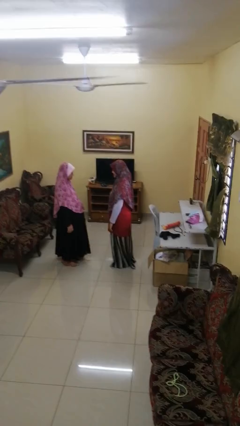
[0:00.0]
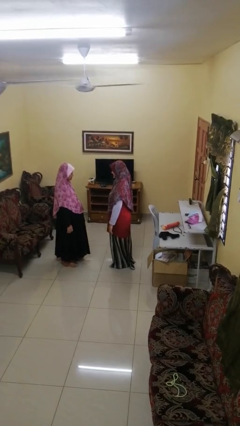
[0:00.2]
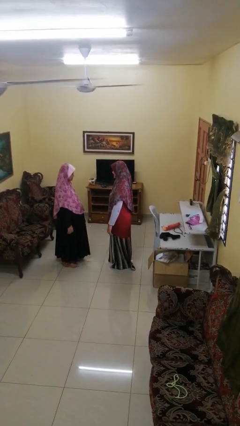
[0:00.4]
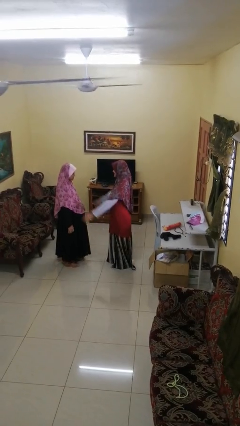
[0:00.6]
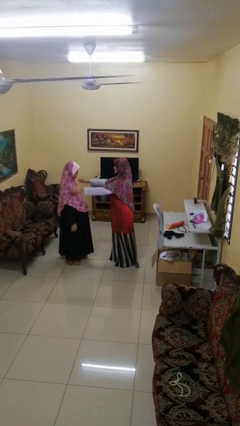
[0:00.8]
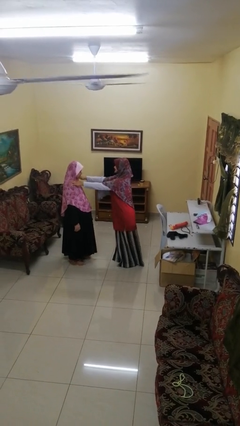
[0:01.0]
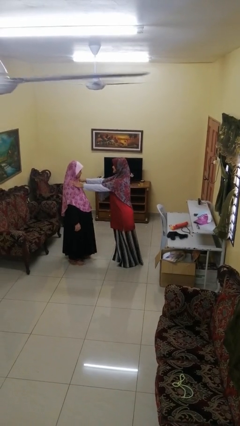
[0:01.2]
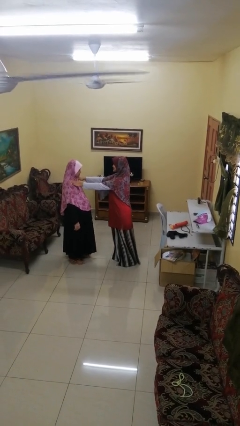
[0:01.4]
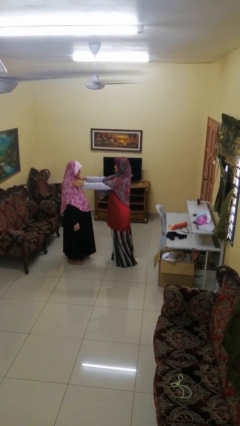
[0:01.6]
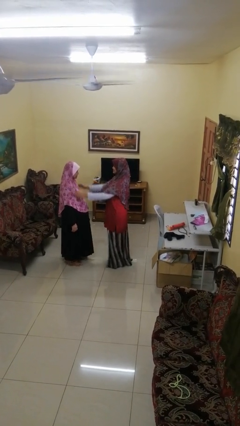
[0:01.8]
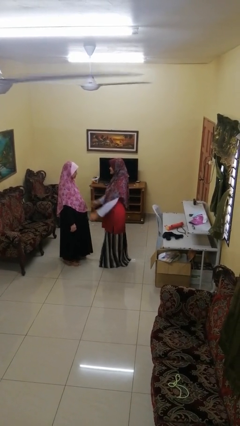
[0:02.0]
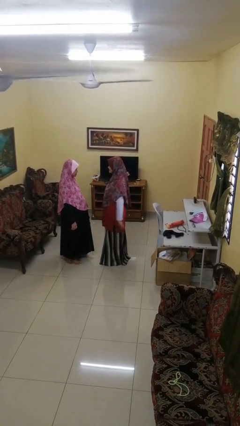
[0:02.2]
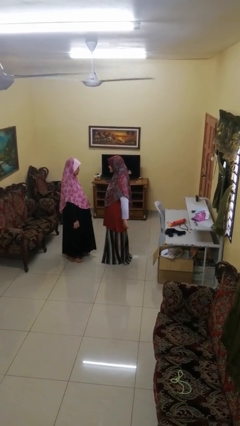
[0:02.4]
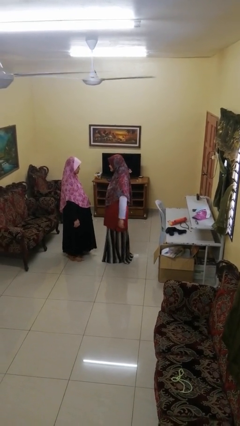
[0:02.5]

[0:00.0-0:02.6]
person pounds shoulders of person

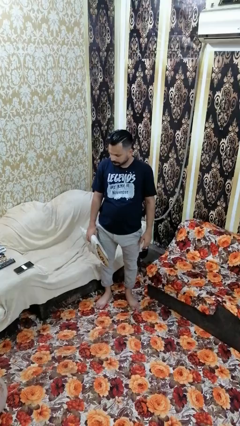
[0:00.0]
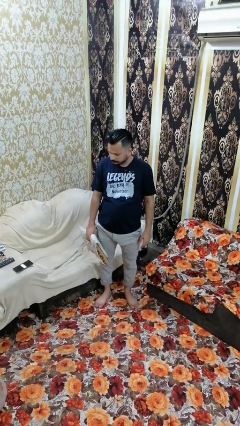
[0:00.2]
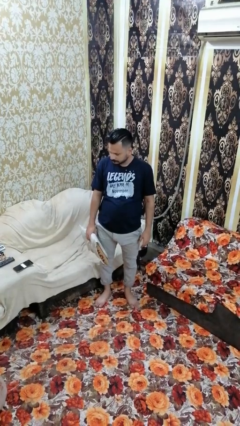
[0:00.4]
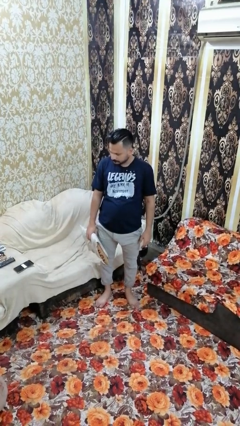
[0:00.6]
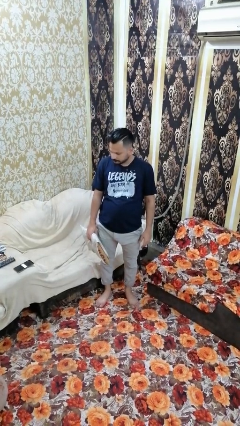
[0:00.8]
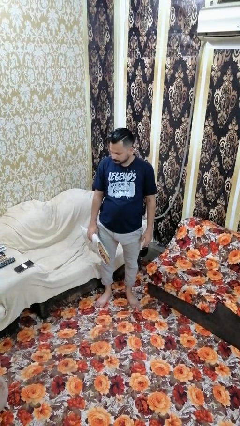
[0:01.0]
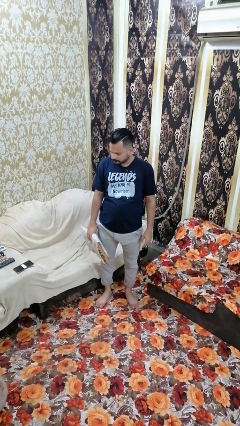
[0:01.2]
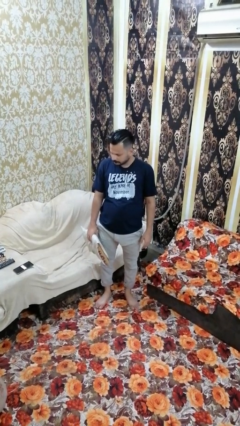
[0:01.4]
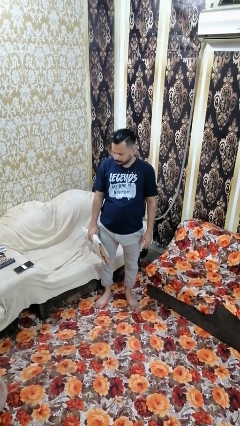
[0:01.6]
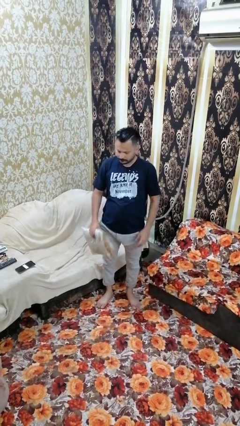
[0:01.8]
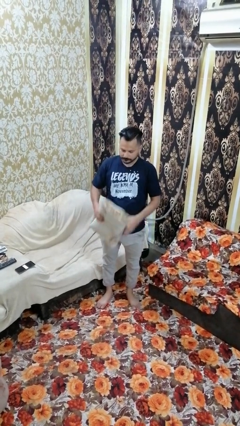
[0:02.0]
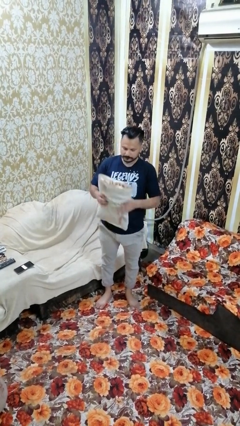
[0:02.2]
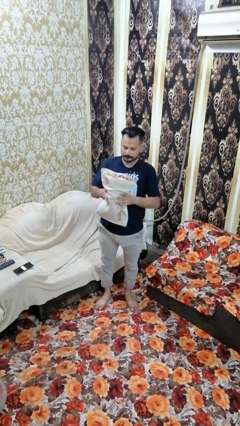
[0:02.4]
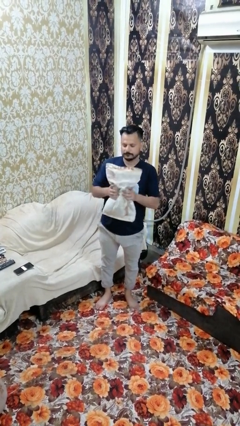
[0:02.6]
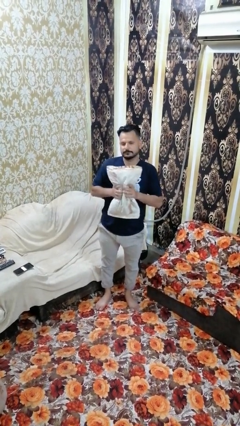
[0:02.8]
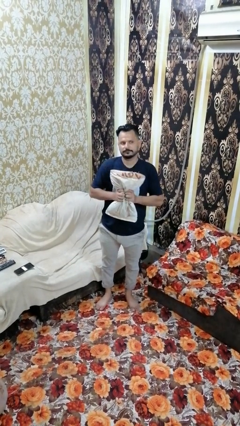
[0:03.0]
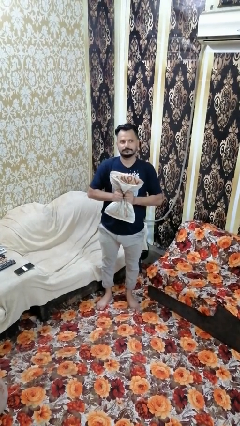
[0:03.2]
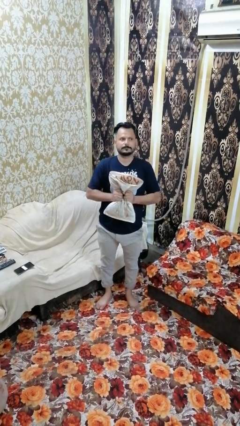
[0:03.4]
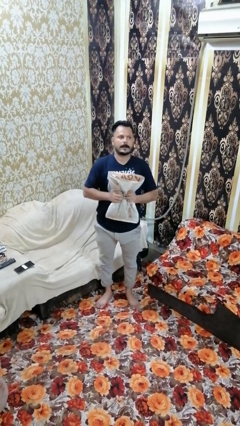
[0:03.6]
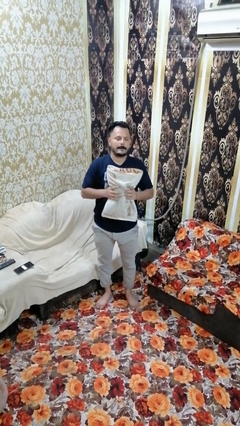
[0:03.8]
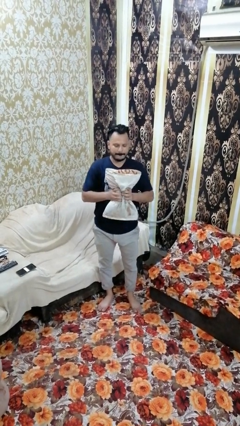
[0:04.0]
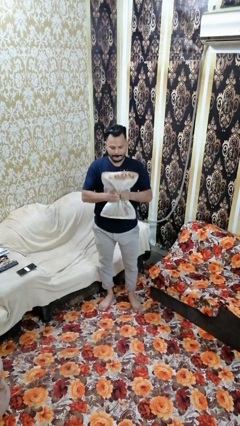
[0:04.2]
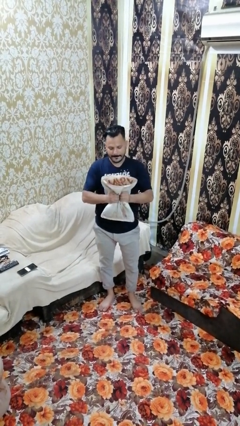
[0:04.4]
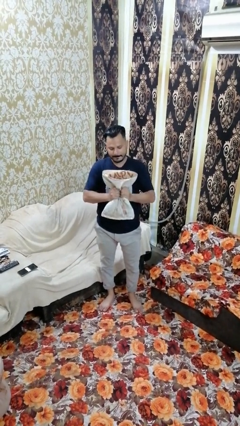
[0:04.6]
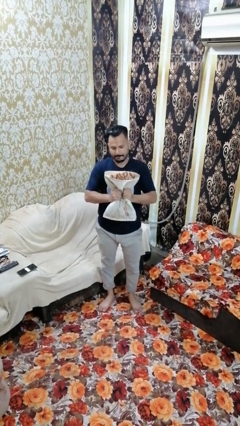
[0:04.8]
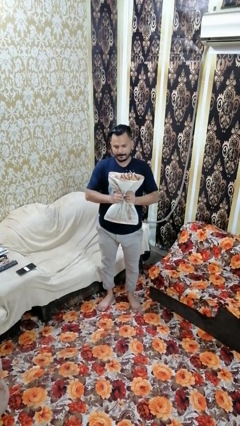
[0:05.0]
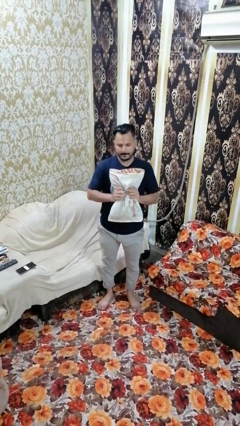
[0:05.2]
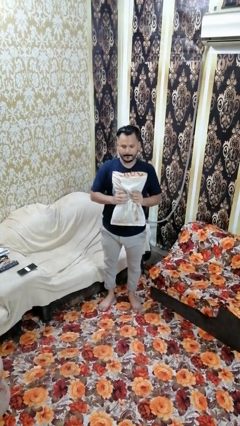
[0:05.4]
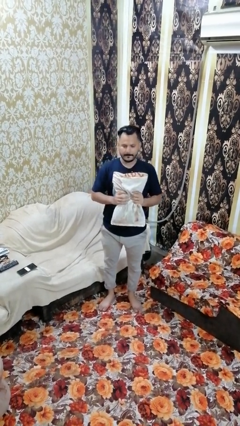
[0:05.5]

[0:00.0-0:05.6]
person squeezes object

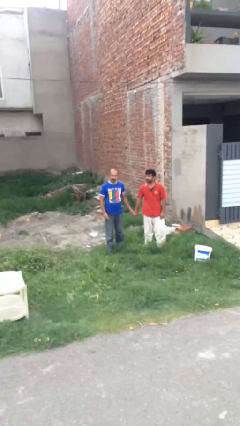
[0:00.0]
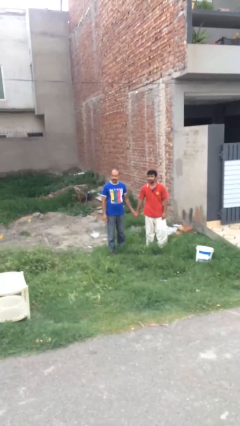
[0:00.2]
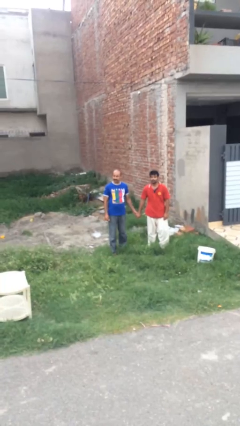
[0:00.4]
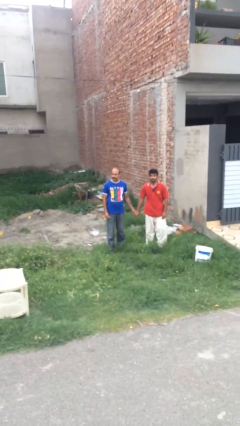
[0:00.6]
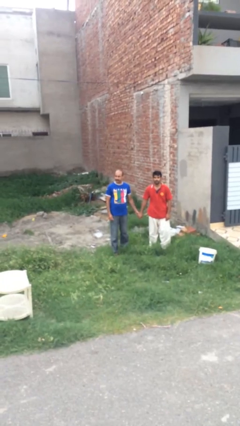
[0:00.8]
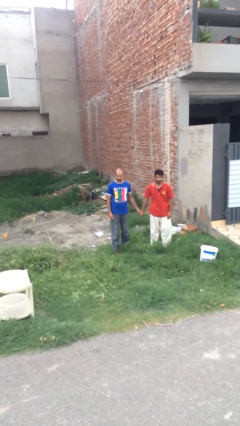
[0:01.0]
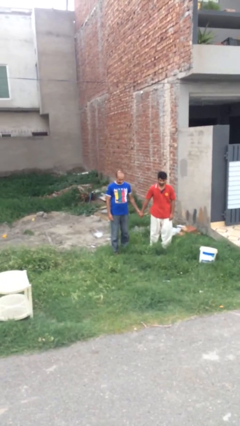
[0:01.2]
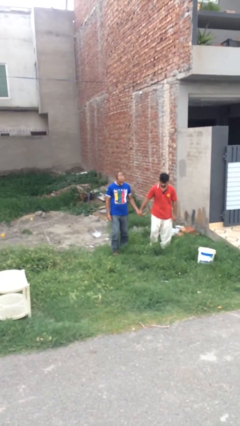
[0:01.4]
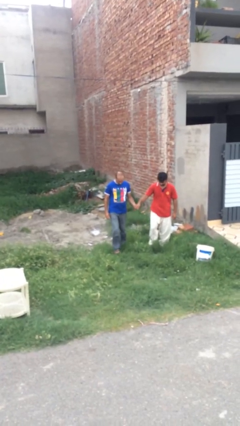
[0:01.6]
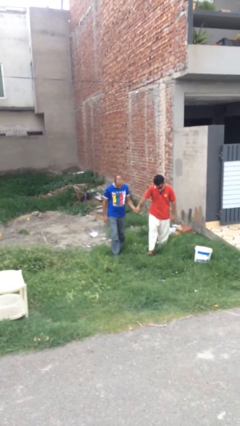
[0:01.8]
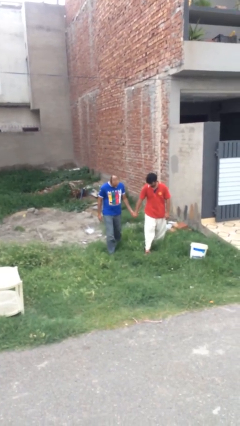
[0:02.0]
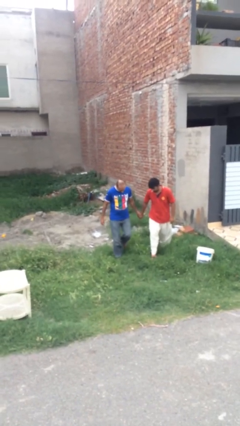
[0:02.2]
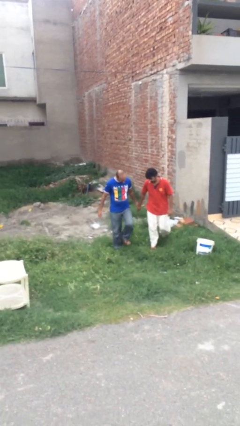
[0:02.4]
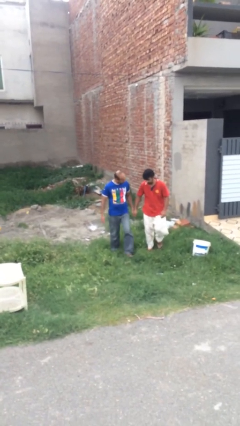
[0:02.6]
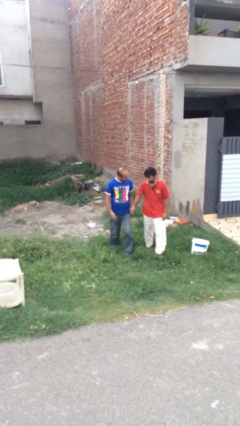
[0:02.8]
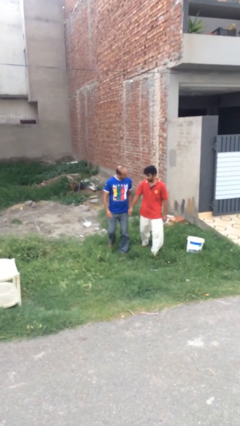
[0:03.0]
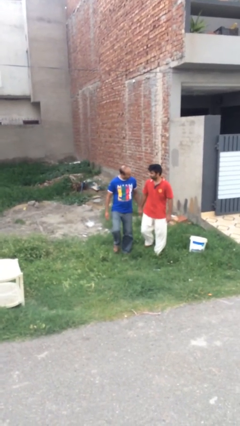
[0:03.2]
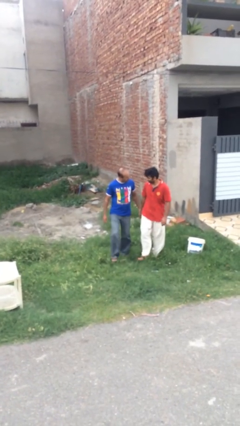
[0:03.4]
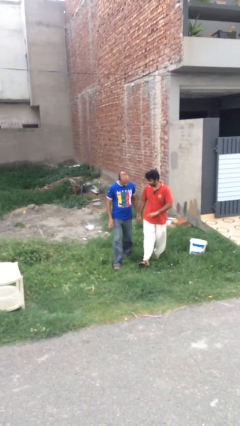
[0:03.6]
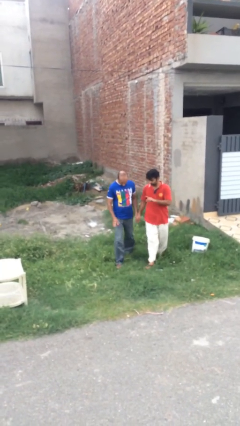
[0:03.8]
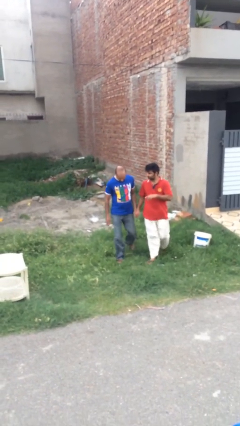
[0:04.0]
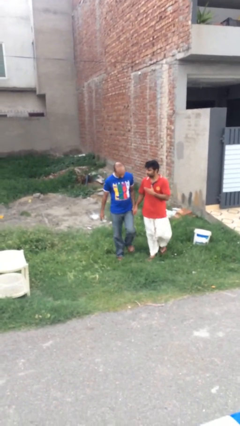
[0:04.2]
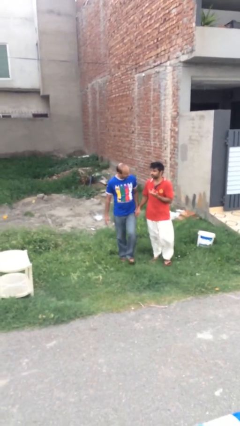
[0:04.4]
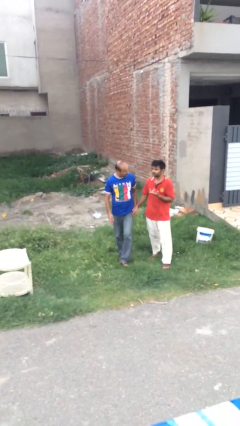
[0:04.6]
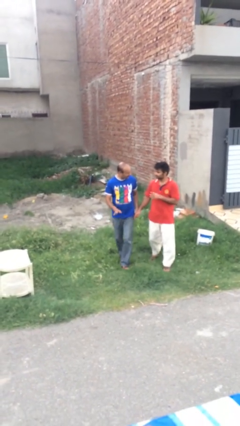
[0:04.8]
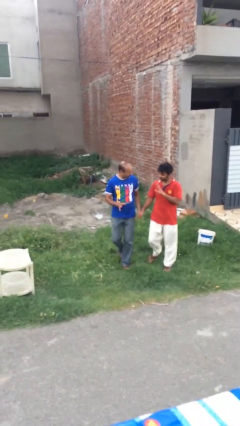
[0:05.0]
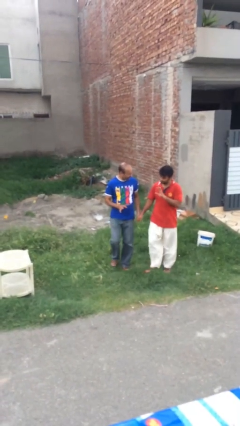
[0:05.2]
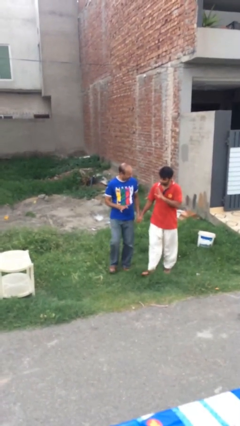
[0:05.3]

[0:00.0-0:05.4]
person holds hand

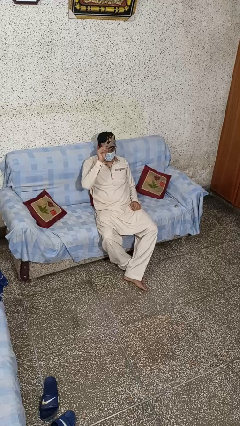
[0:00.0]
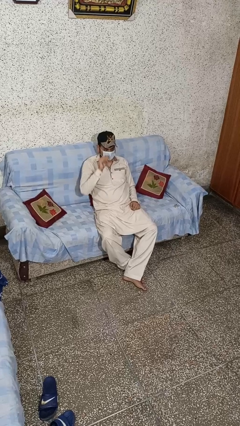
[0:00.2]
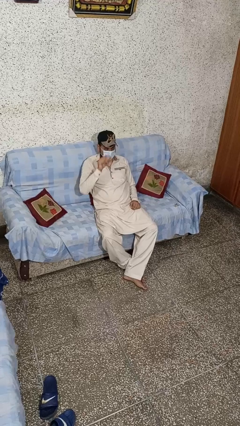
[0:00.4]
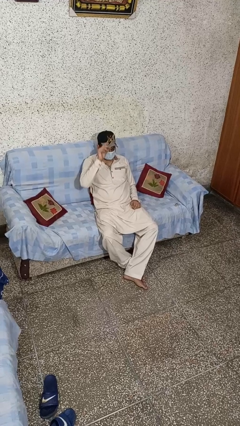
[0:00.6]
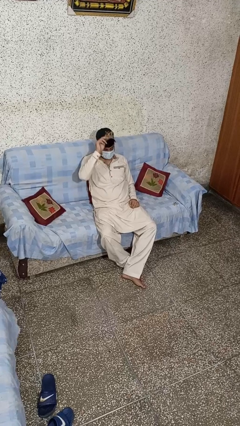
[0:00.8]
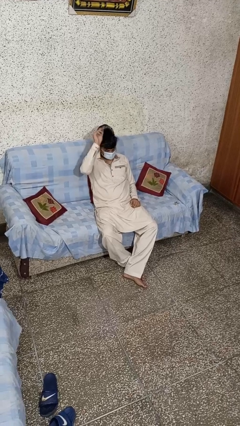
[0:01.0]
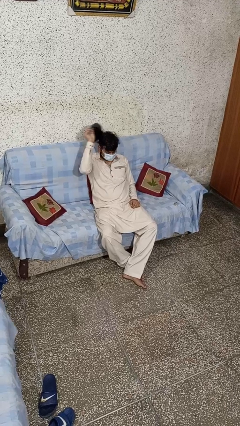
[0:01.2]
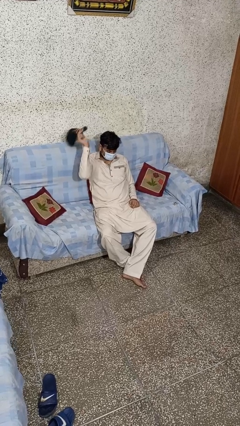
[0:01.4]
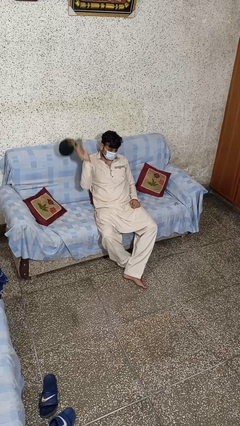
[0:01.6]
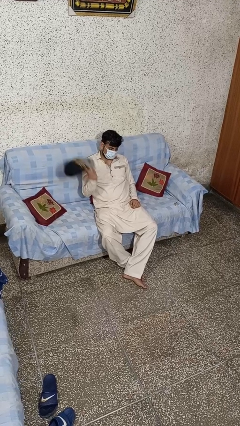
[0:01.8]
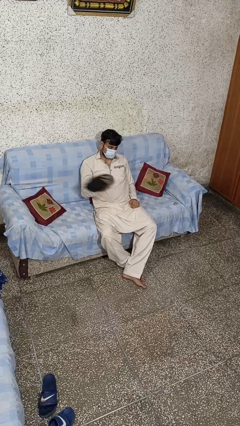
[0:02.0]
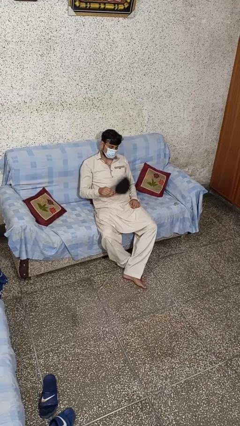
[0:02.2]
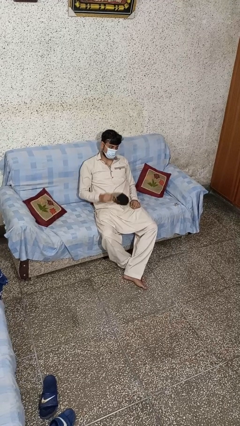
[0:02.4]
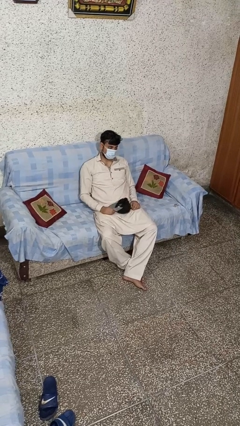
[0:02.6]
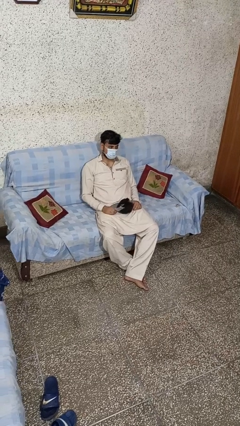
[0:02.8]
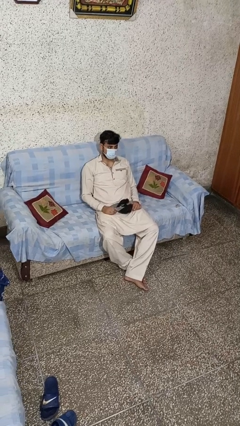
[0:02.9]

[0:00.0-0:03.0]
person takes off hat

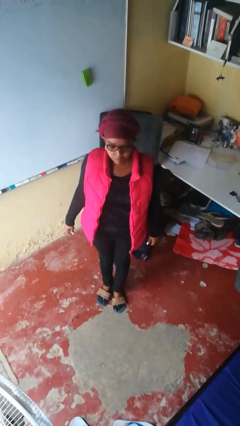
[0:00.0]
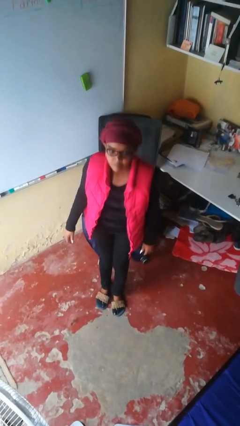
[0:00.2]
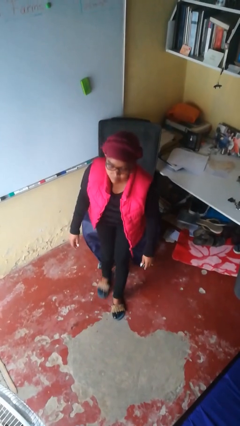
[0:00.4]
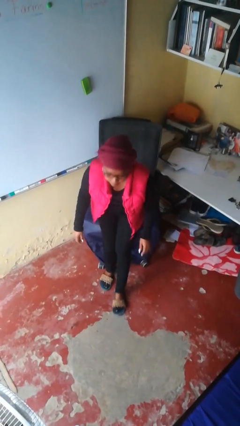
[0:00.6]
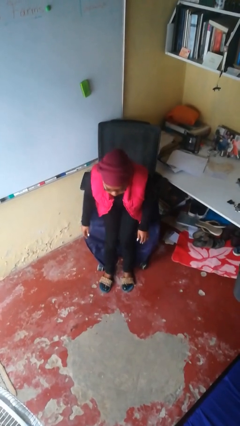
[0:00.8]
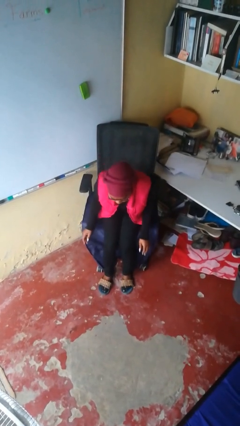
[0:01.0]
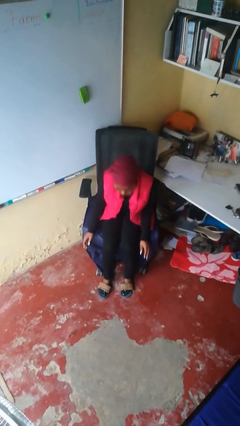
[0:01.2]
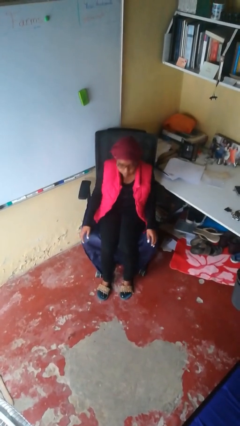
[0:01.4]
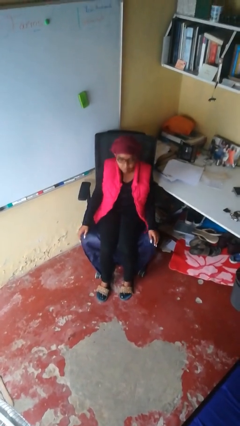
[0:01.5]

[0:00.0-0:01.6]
person sits down
